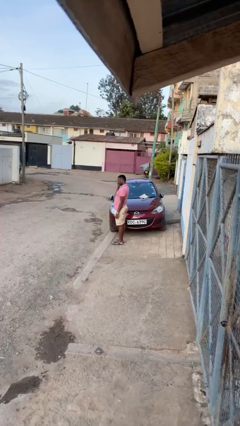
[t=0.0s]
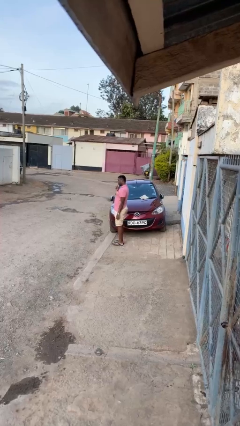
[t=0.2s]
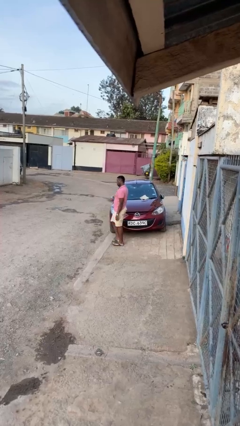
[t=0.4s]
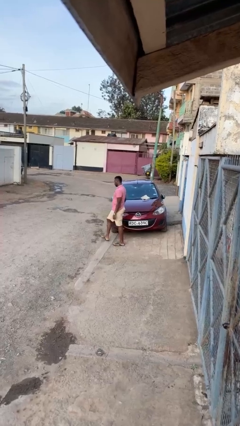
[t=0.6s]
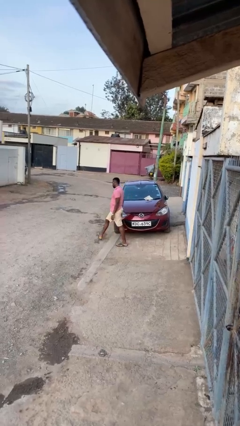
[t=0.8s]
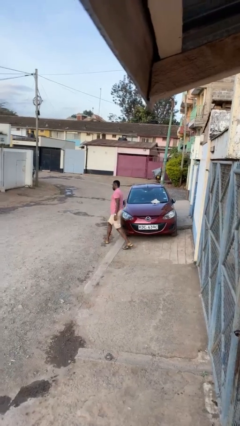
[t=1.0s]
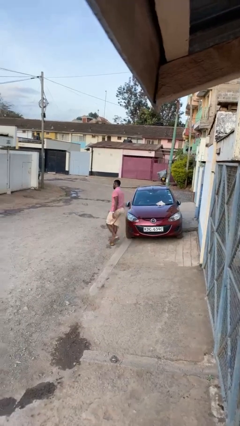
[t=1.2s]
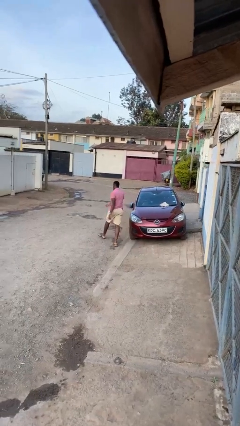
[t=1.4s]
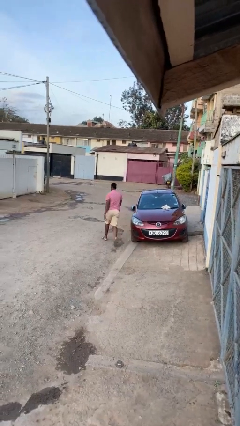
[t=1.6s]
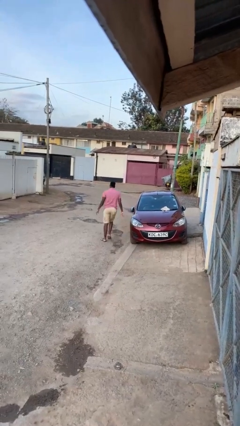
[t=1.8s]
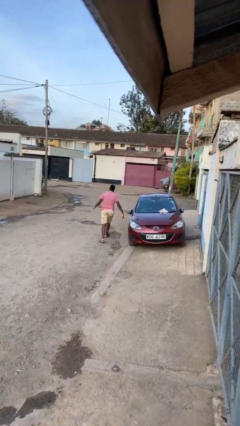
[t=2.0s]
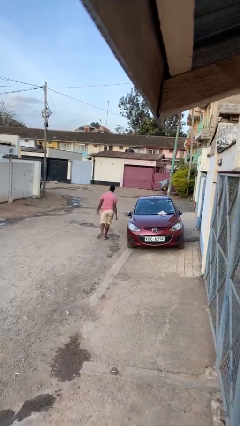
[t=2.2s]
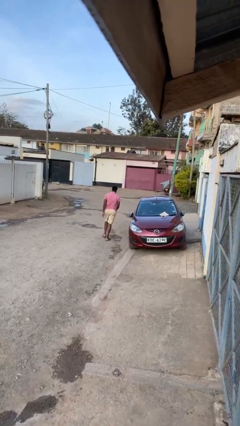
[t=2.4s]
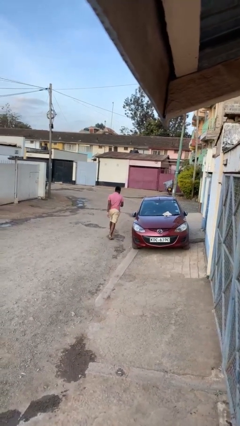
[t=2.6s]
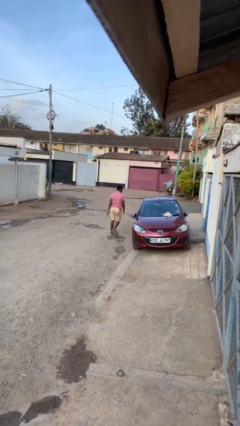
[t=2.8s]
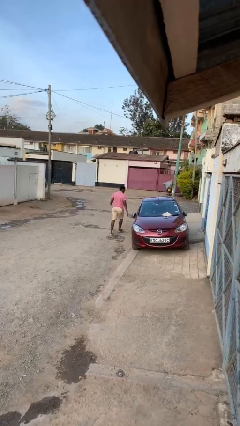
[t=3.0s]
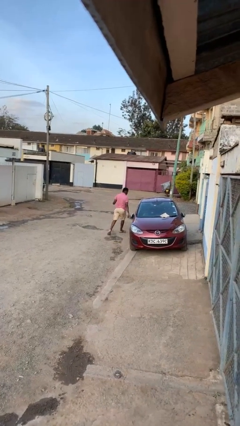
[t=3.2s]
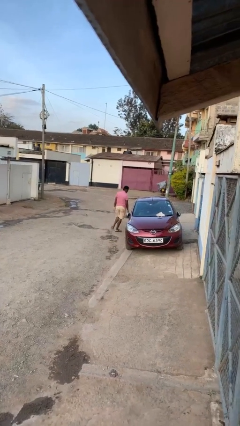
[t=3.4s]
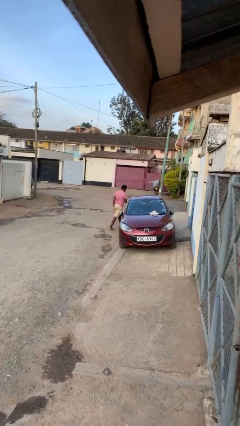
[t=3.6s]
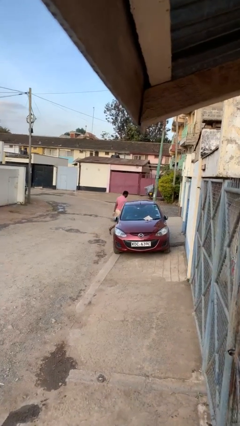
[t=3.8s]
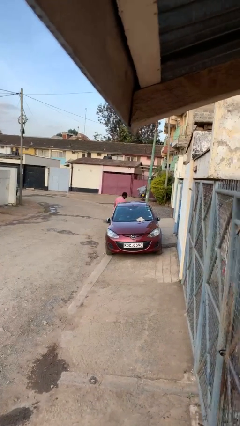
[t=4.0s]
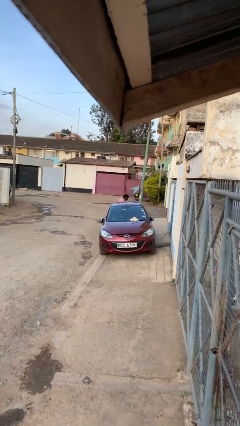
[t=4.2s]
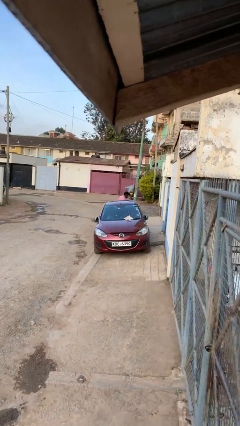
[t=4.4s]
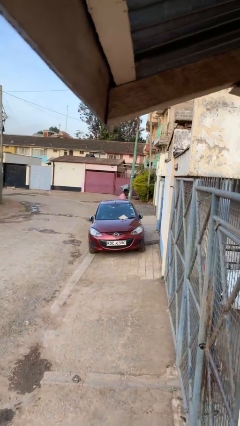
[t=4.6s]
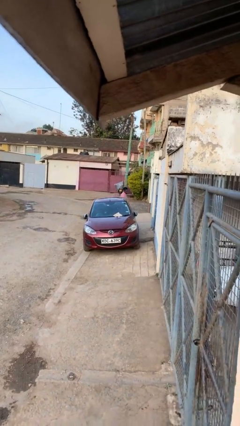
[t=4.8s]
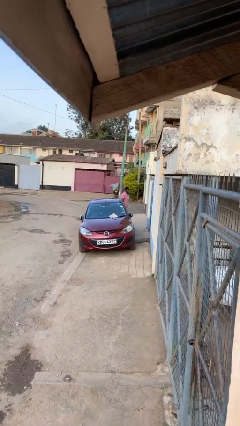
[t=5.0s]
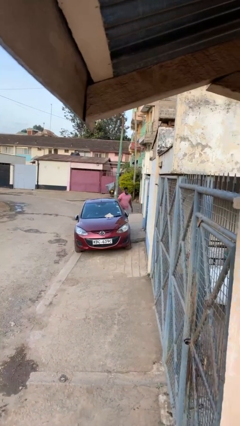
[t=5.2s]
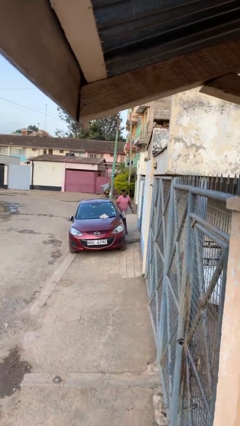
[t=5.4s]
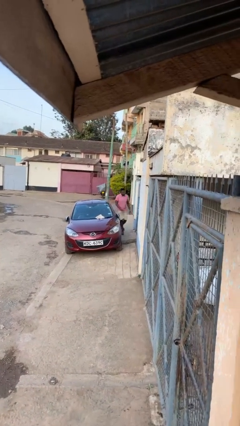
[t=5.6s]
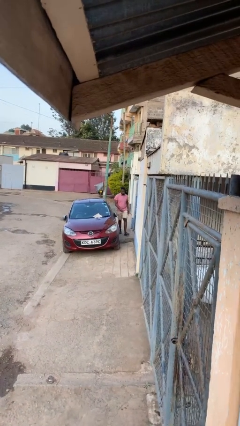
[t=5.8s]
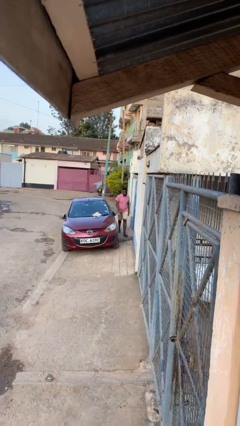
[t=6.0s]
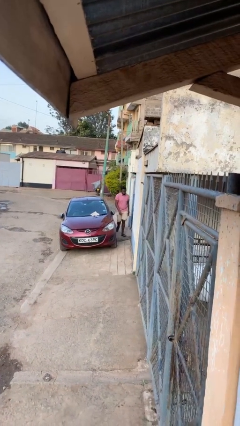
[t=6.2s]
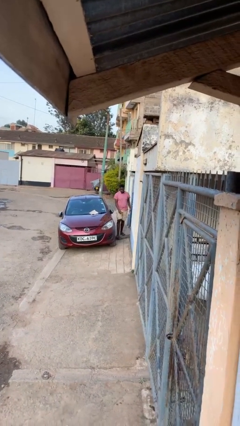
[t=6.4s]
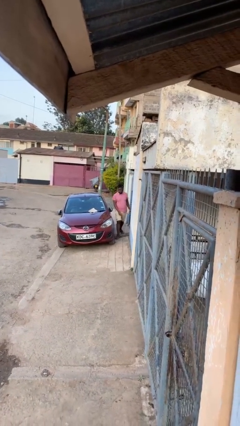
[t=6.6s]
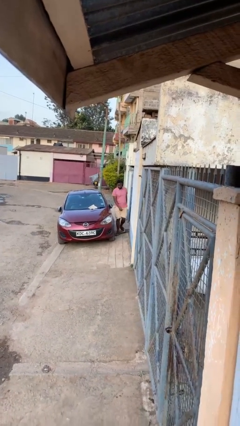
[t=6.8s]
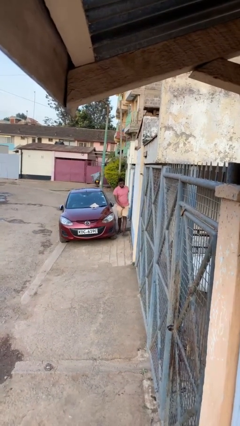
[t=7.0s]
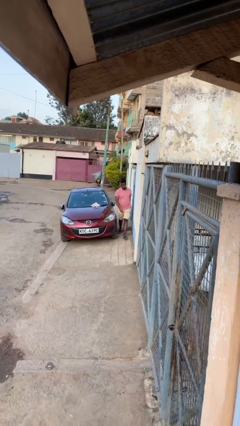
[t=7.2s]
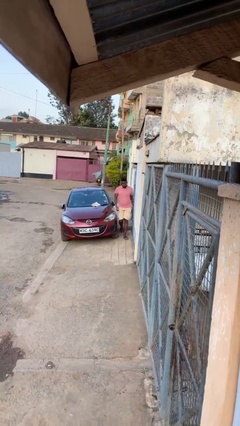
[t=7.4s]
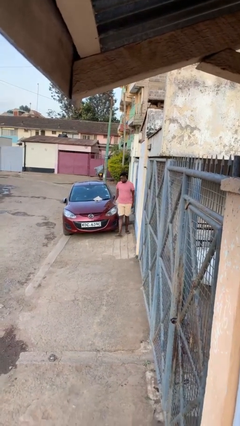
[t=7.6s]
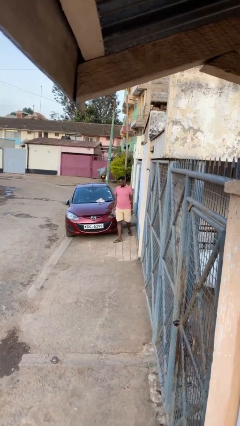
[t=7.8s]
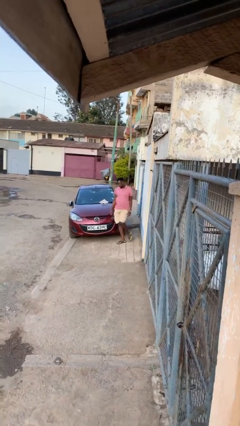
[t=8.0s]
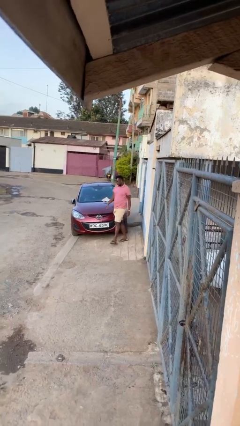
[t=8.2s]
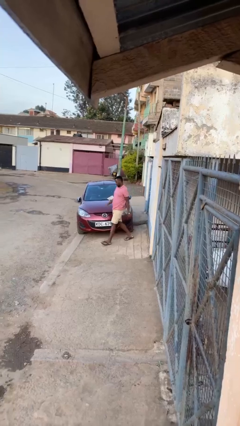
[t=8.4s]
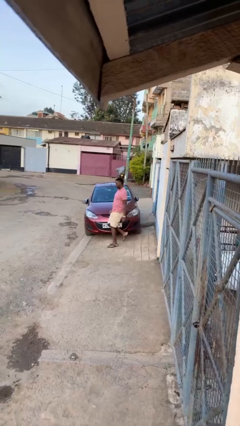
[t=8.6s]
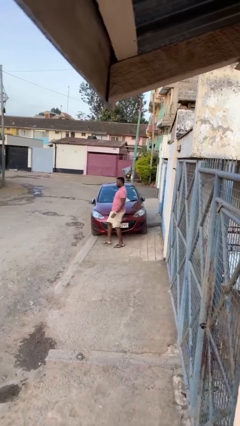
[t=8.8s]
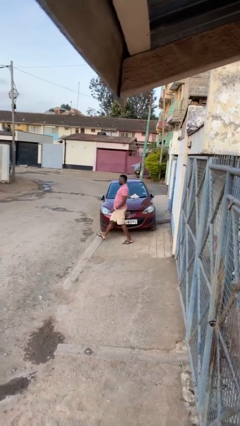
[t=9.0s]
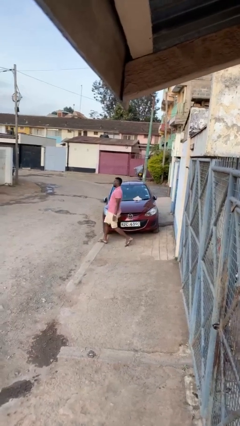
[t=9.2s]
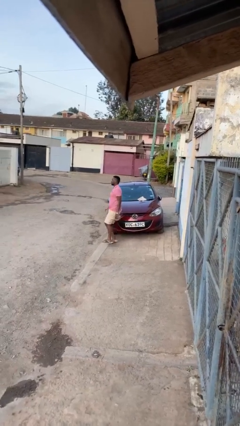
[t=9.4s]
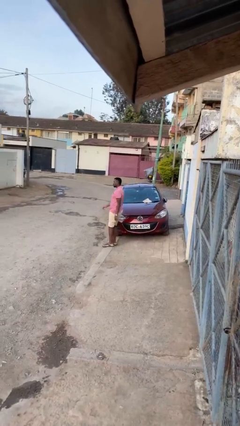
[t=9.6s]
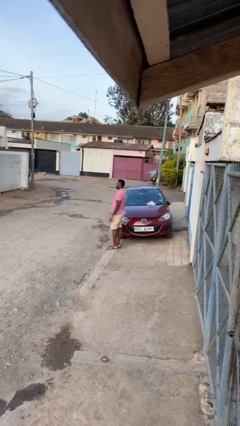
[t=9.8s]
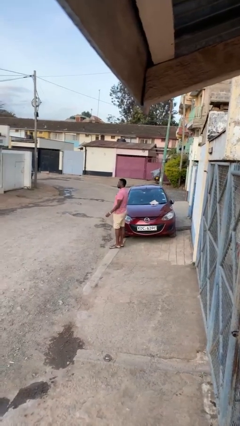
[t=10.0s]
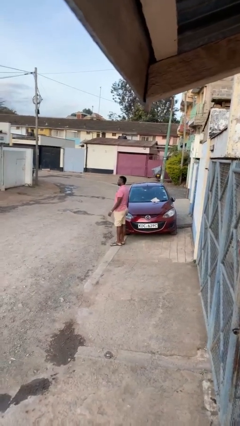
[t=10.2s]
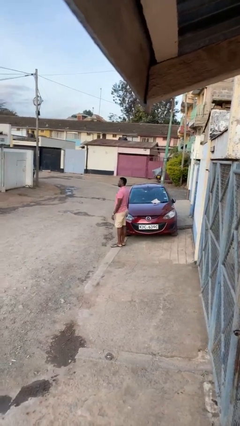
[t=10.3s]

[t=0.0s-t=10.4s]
person walks around car

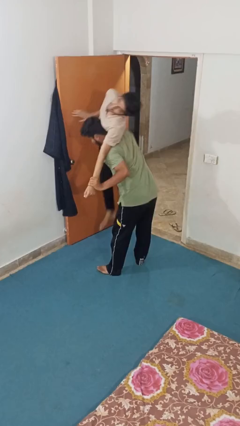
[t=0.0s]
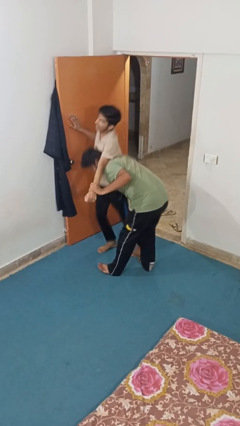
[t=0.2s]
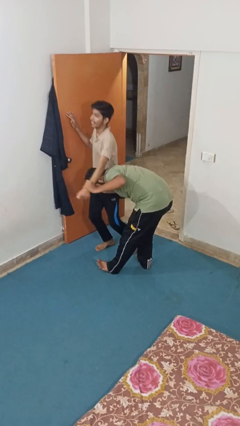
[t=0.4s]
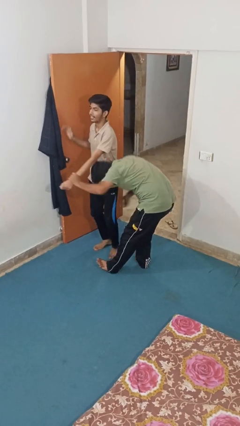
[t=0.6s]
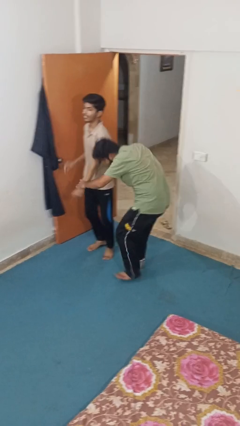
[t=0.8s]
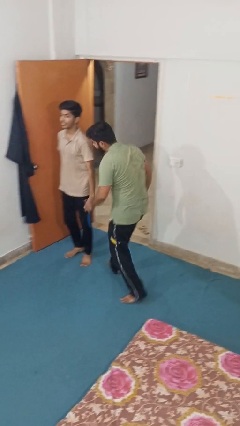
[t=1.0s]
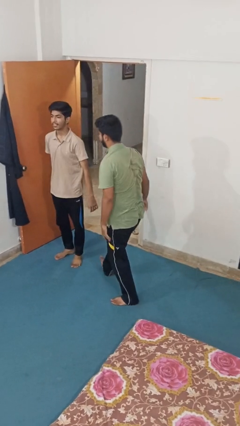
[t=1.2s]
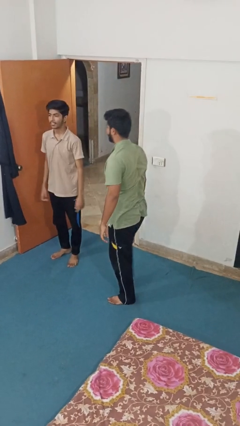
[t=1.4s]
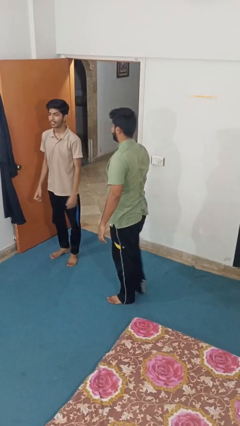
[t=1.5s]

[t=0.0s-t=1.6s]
person puts down person

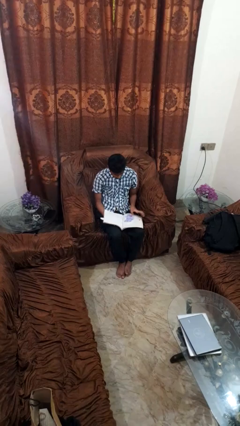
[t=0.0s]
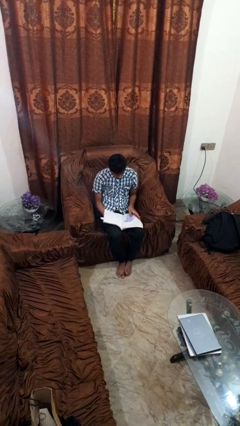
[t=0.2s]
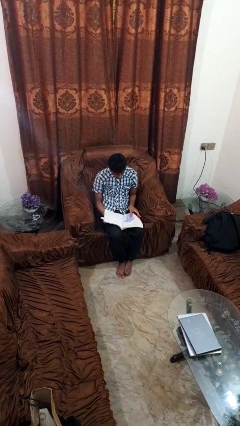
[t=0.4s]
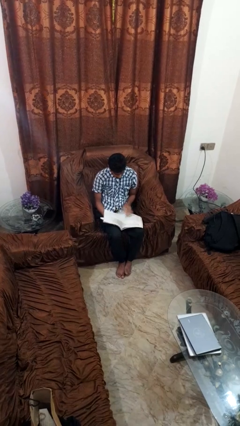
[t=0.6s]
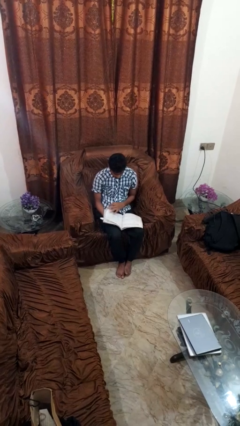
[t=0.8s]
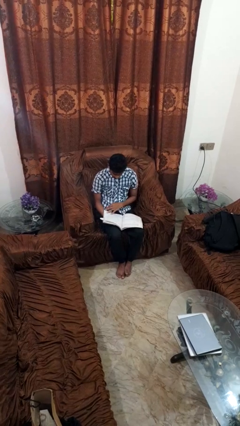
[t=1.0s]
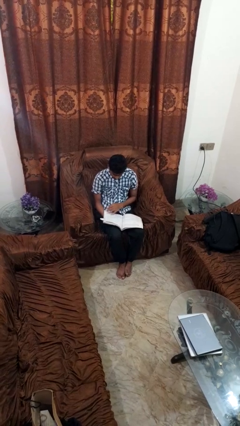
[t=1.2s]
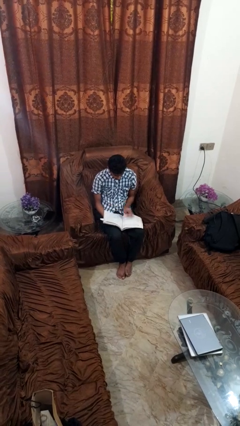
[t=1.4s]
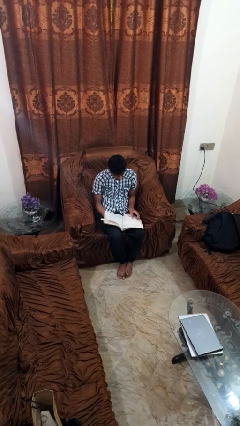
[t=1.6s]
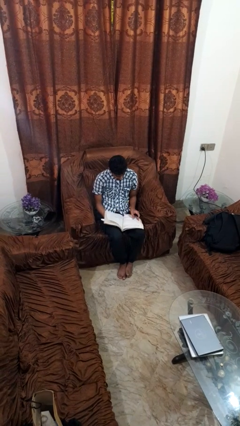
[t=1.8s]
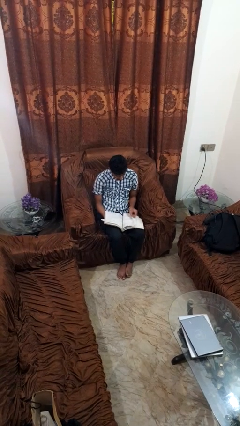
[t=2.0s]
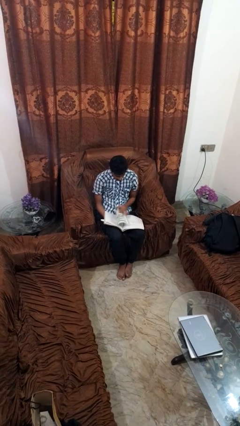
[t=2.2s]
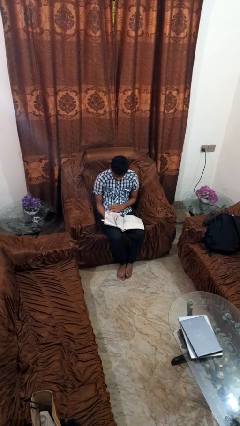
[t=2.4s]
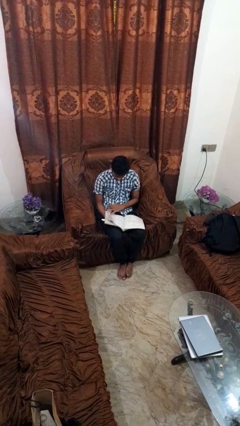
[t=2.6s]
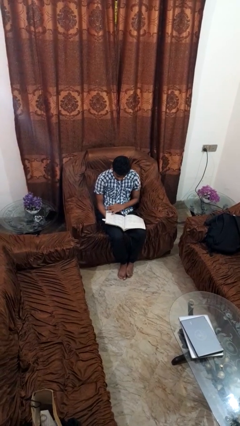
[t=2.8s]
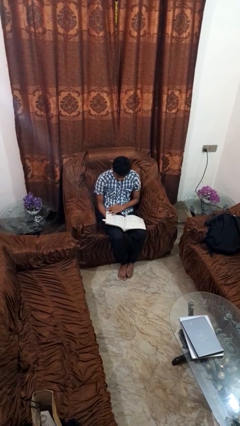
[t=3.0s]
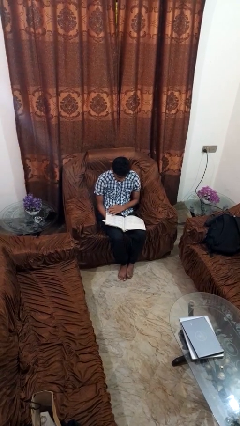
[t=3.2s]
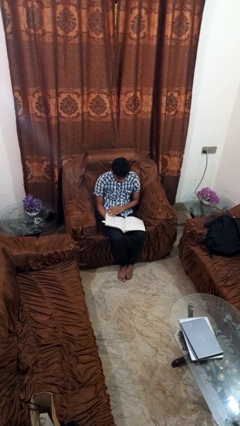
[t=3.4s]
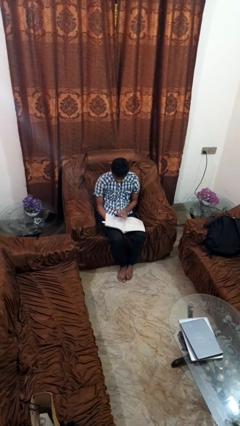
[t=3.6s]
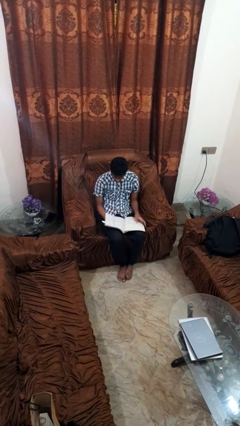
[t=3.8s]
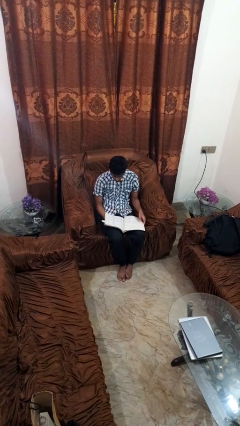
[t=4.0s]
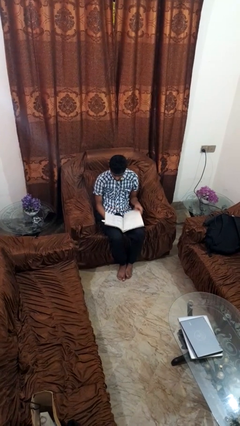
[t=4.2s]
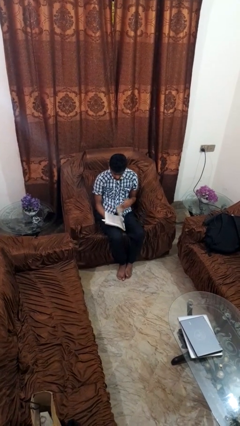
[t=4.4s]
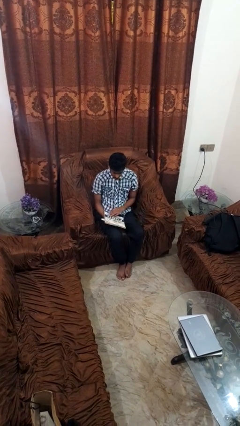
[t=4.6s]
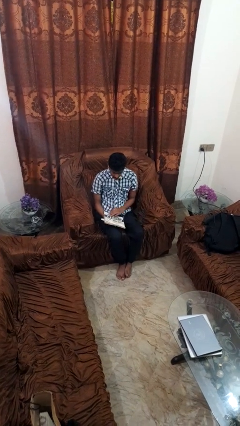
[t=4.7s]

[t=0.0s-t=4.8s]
person reads magazine

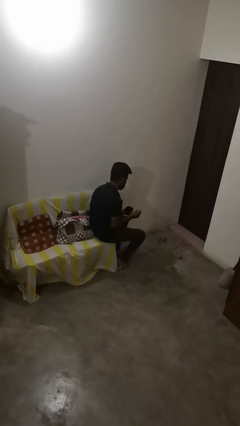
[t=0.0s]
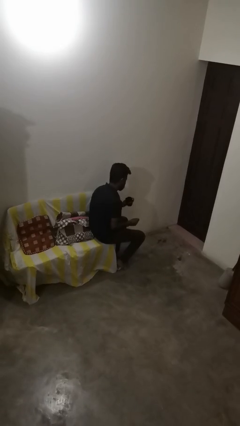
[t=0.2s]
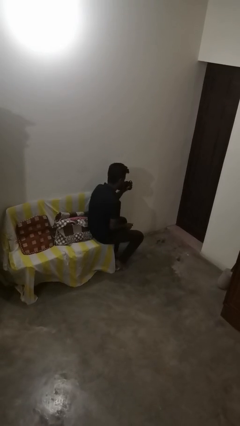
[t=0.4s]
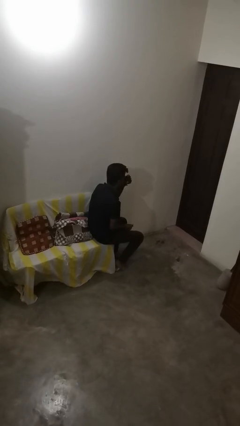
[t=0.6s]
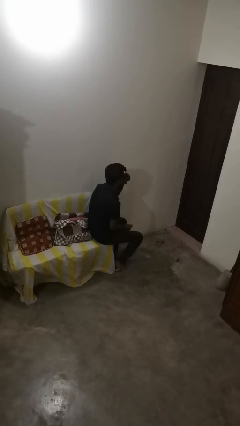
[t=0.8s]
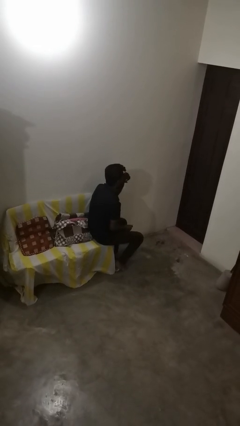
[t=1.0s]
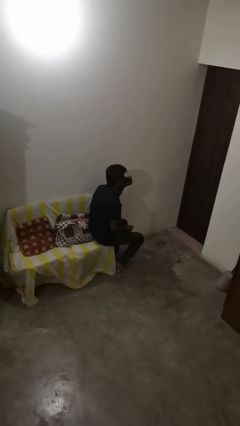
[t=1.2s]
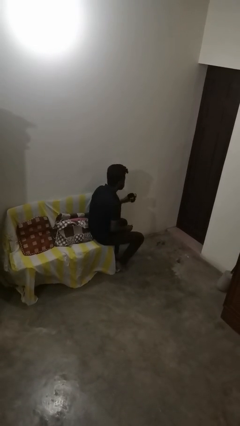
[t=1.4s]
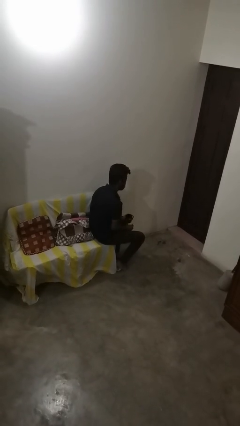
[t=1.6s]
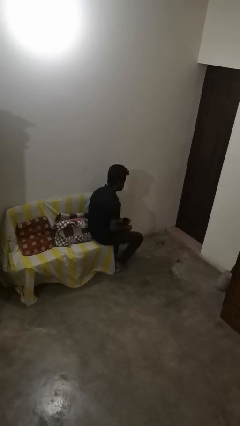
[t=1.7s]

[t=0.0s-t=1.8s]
person drinks from mug
